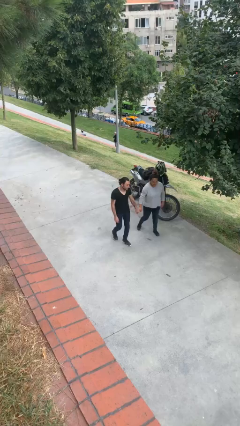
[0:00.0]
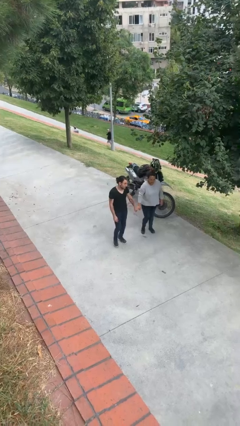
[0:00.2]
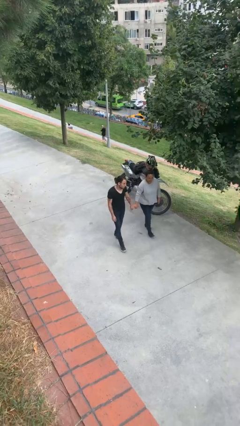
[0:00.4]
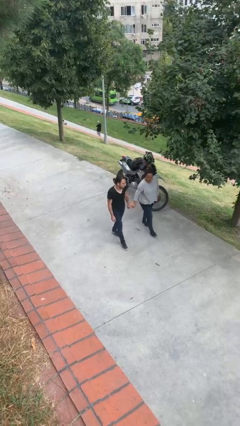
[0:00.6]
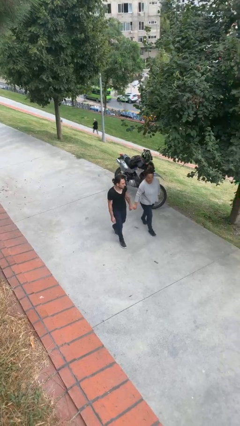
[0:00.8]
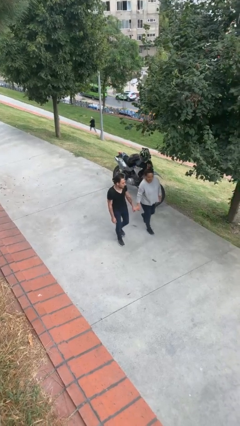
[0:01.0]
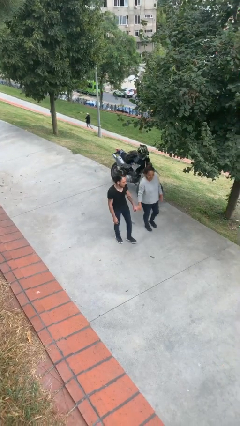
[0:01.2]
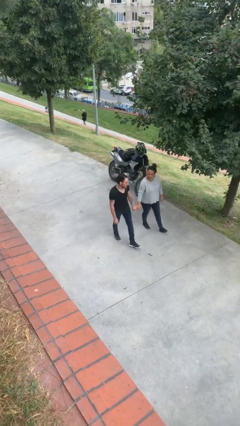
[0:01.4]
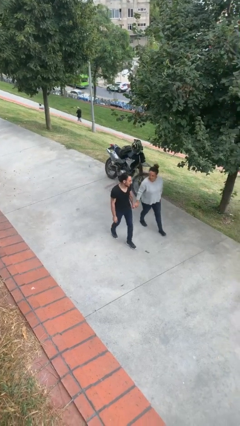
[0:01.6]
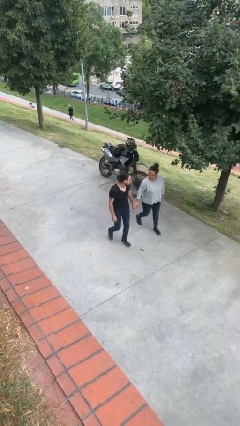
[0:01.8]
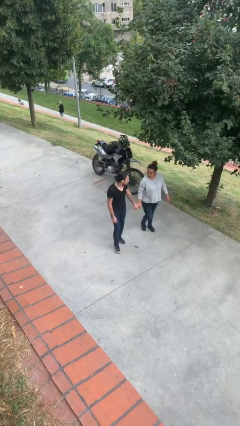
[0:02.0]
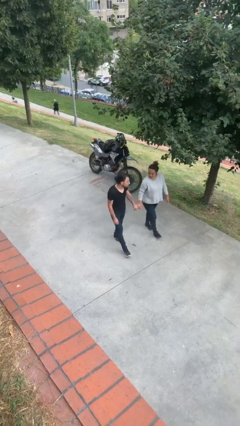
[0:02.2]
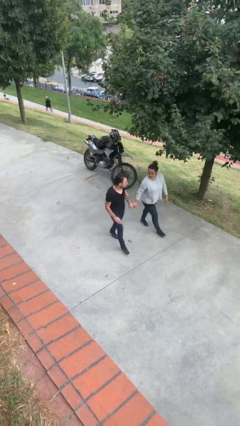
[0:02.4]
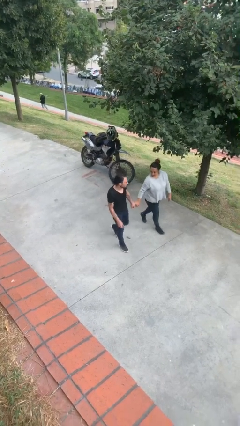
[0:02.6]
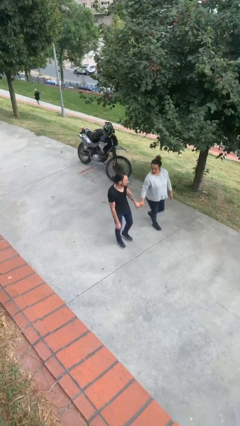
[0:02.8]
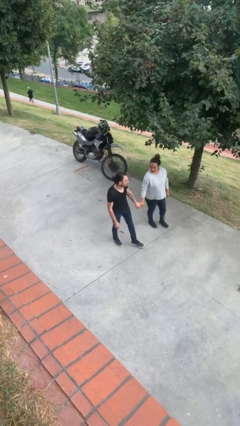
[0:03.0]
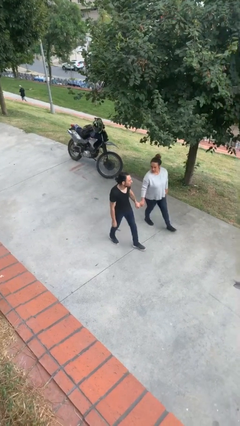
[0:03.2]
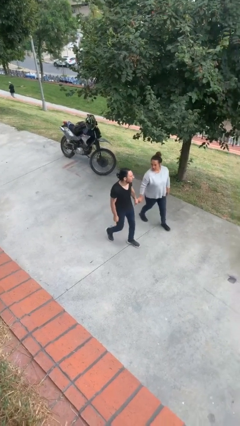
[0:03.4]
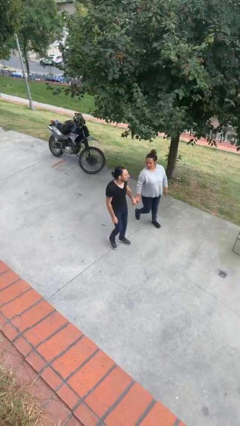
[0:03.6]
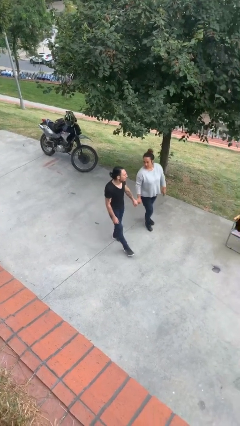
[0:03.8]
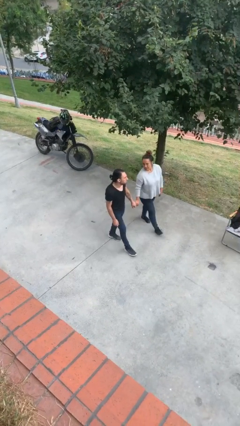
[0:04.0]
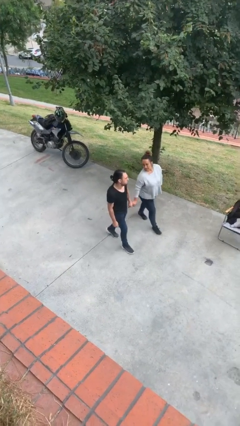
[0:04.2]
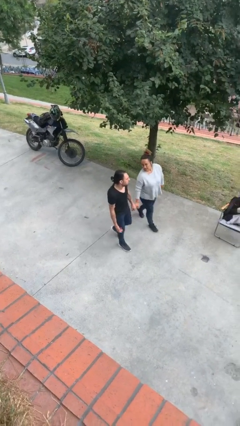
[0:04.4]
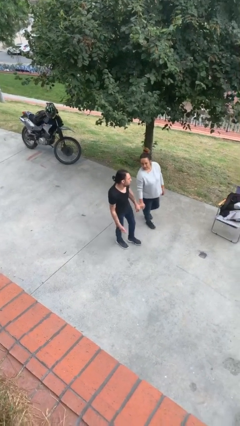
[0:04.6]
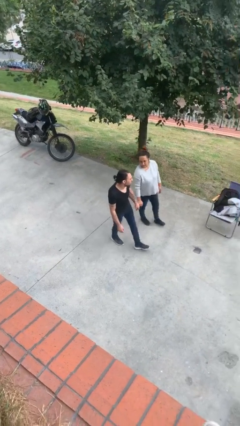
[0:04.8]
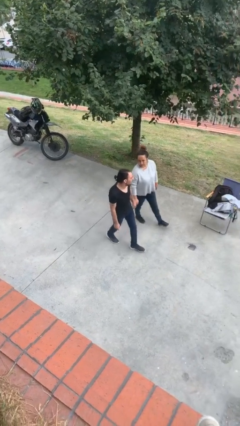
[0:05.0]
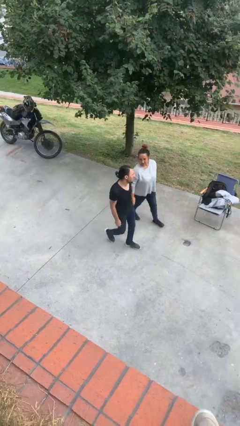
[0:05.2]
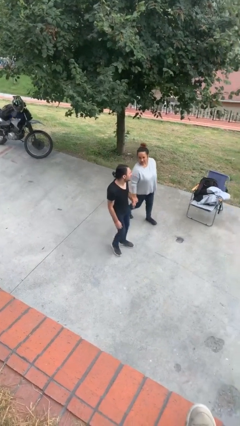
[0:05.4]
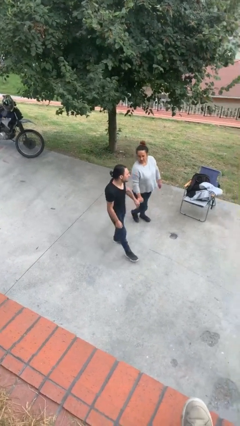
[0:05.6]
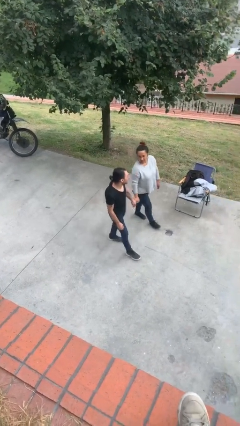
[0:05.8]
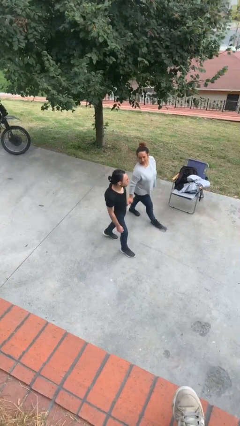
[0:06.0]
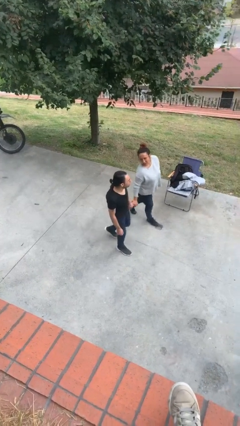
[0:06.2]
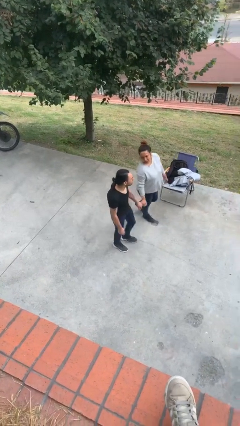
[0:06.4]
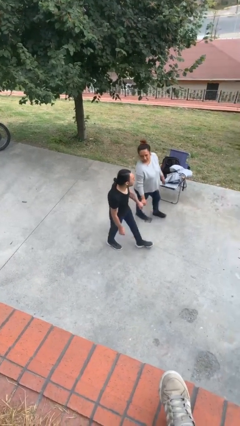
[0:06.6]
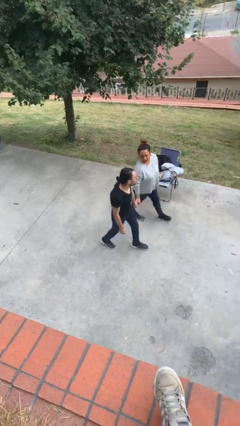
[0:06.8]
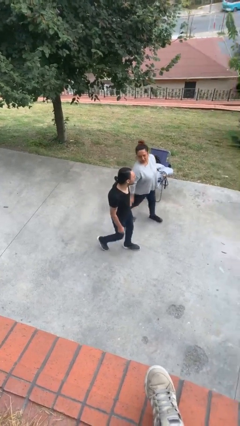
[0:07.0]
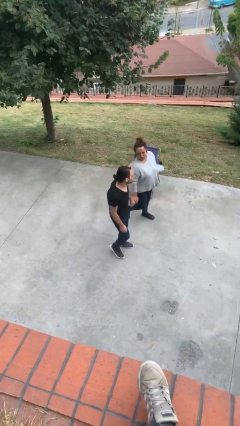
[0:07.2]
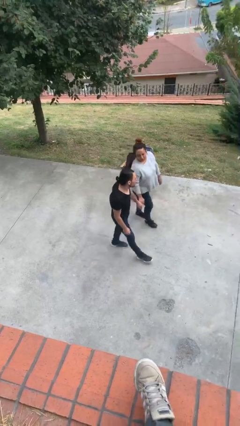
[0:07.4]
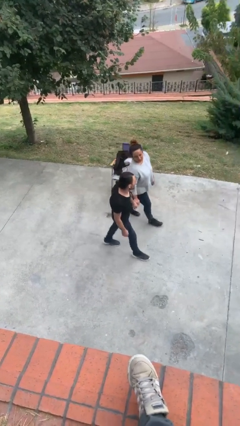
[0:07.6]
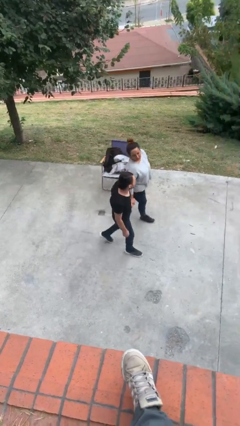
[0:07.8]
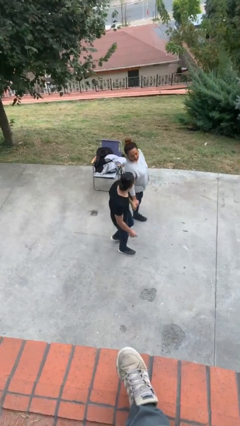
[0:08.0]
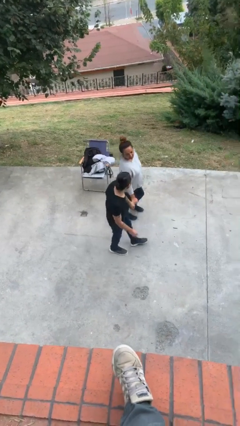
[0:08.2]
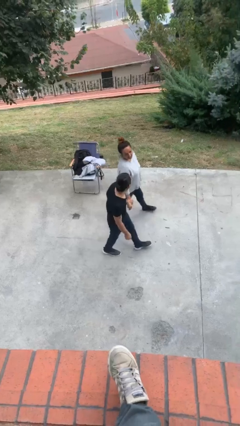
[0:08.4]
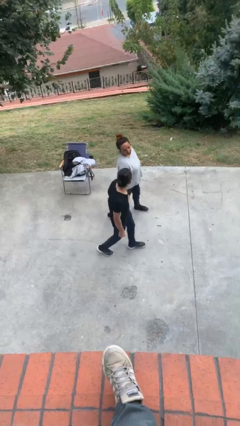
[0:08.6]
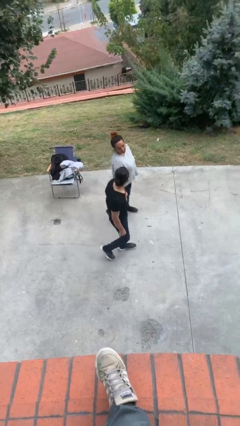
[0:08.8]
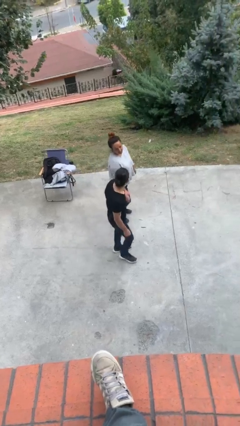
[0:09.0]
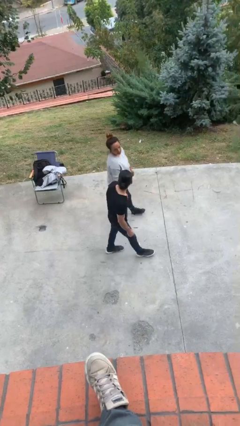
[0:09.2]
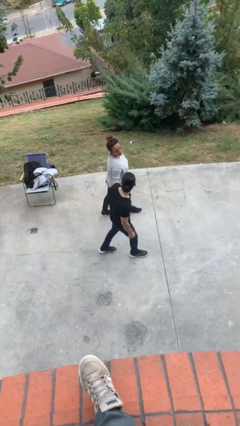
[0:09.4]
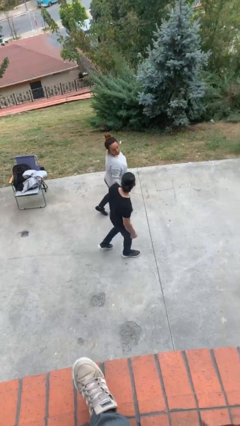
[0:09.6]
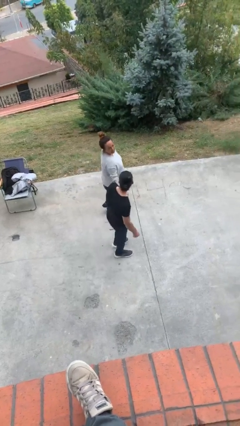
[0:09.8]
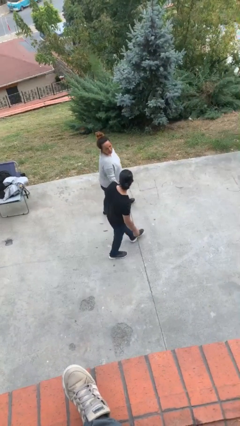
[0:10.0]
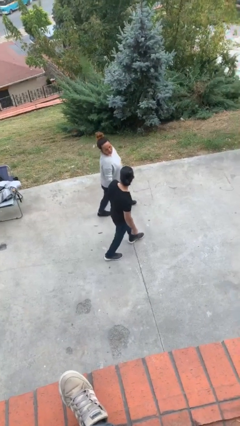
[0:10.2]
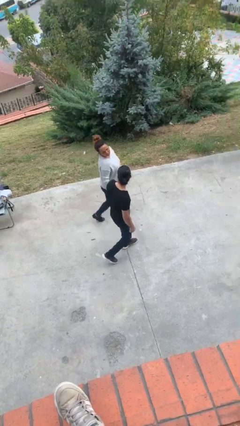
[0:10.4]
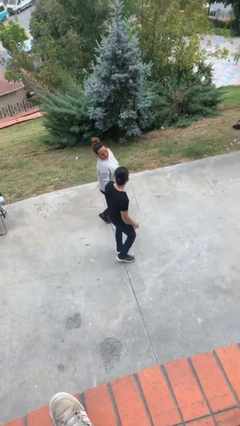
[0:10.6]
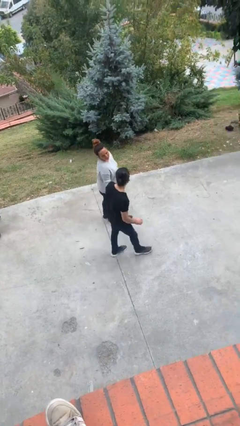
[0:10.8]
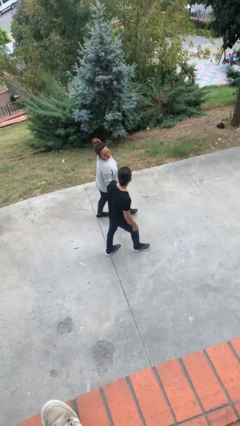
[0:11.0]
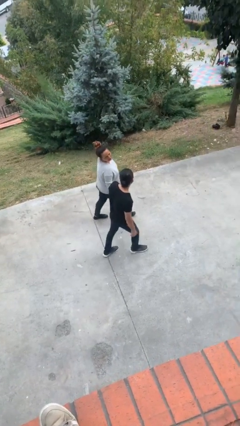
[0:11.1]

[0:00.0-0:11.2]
person holds hand

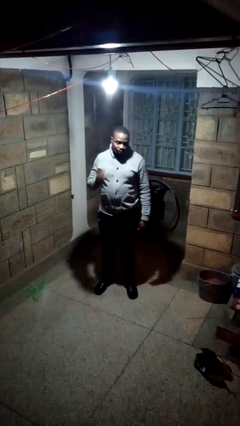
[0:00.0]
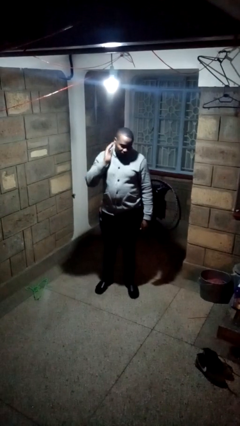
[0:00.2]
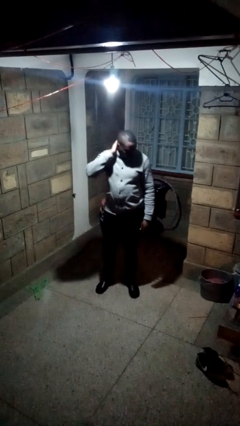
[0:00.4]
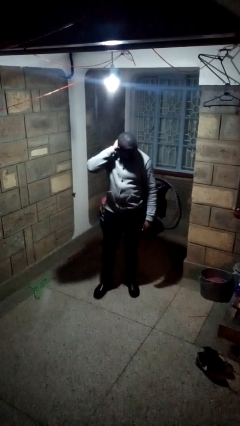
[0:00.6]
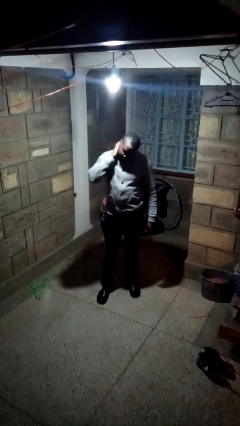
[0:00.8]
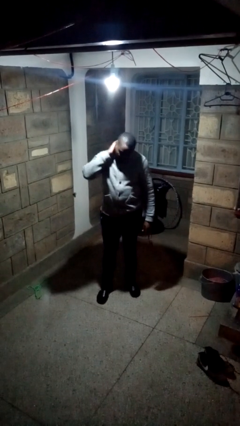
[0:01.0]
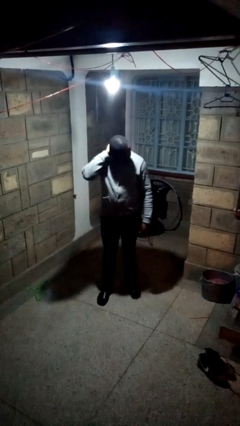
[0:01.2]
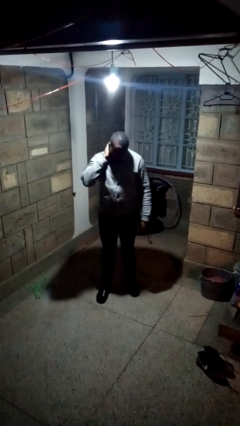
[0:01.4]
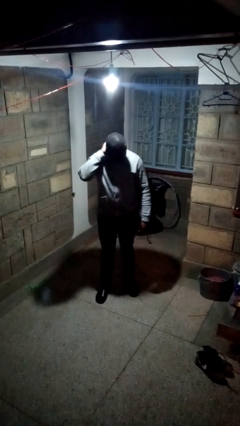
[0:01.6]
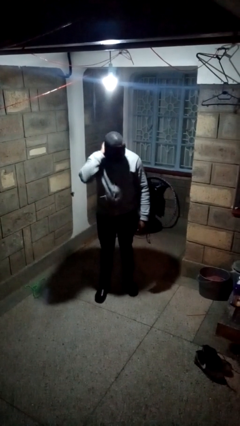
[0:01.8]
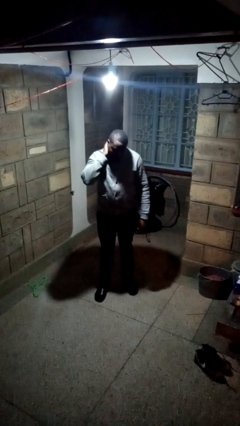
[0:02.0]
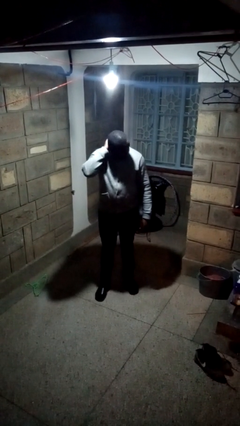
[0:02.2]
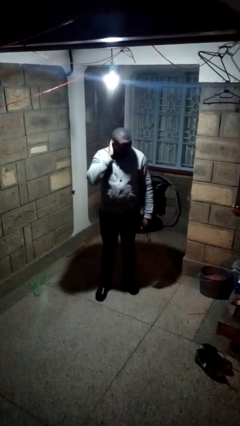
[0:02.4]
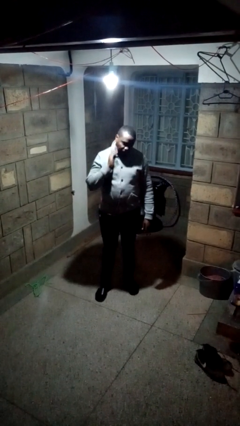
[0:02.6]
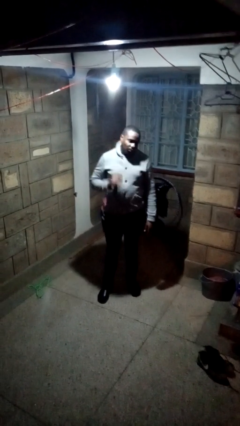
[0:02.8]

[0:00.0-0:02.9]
person rubs neck

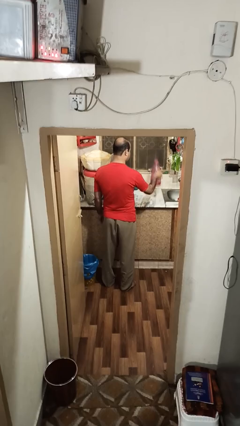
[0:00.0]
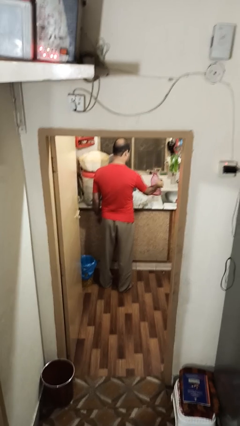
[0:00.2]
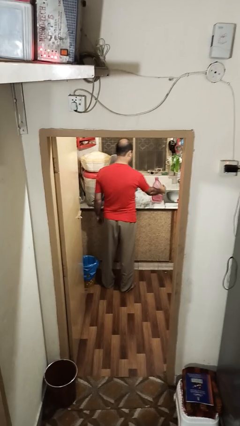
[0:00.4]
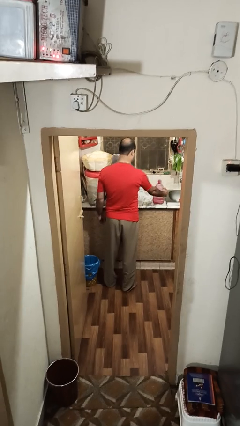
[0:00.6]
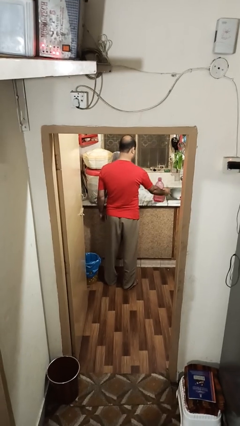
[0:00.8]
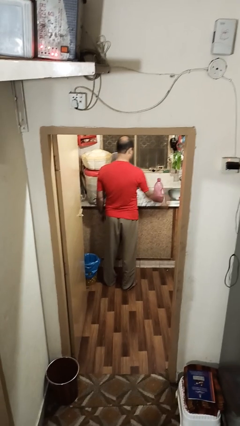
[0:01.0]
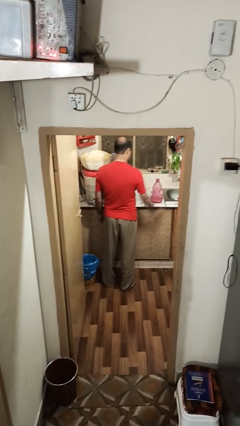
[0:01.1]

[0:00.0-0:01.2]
person puts down object on countertop

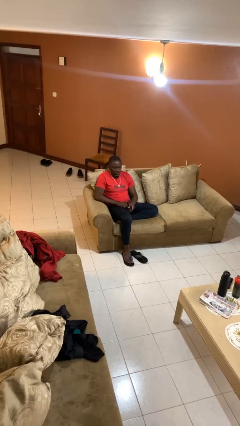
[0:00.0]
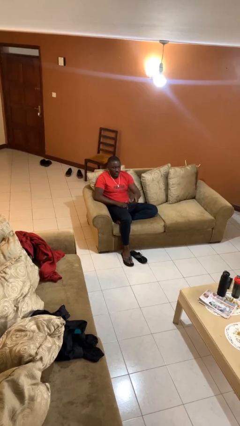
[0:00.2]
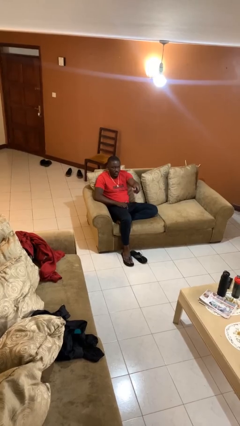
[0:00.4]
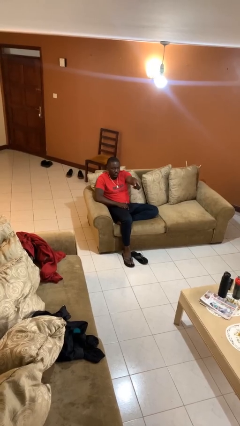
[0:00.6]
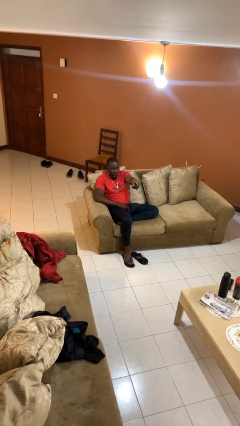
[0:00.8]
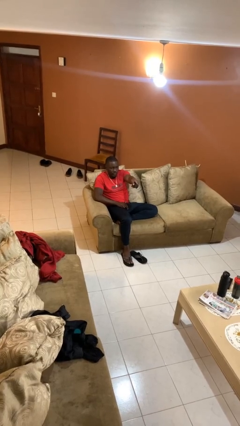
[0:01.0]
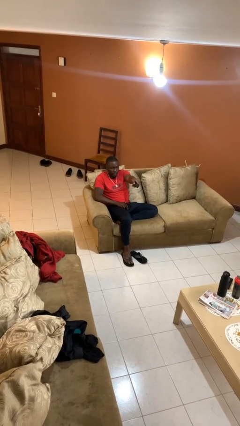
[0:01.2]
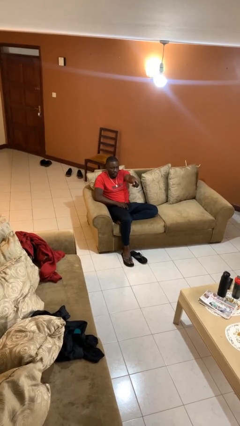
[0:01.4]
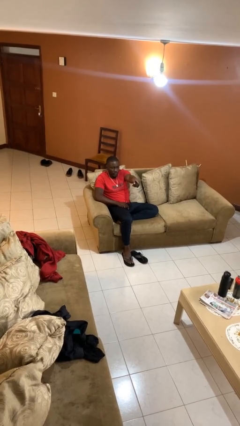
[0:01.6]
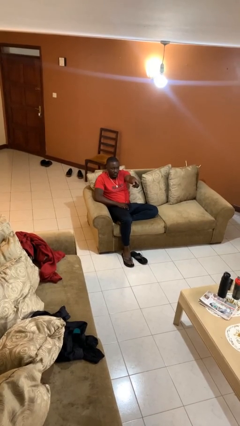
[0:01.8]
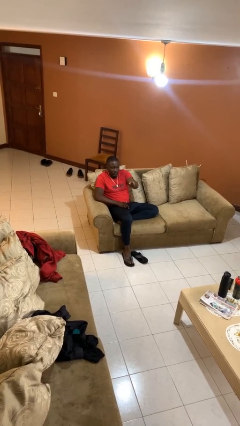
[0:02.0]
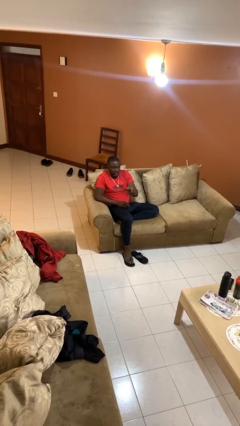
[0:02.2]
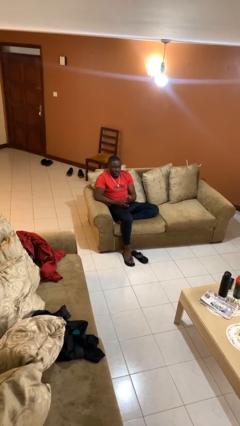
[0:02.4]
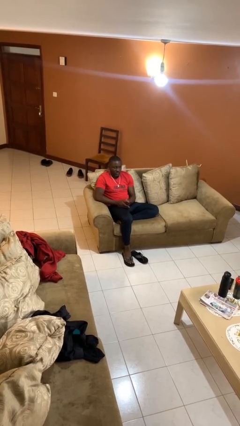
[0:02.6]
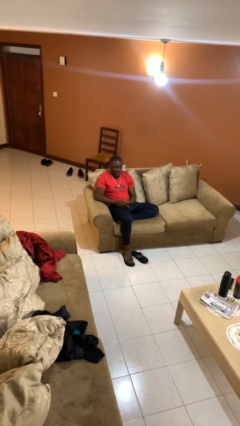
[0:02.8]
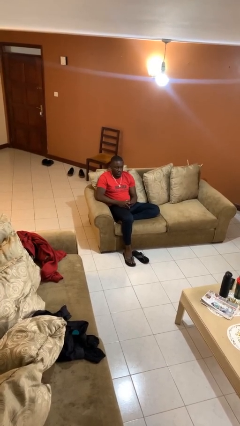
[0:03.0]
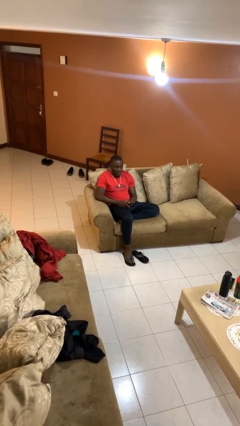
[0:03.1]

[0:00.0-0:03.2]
person uses television remote
